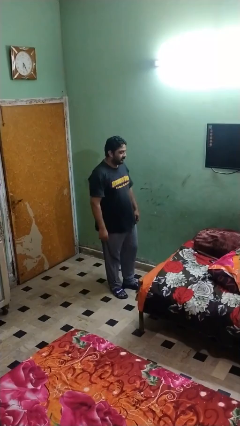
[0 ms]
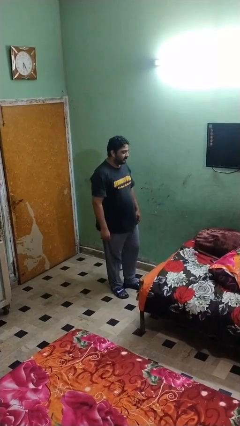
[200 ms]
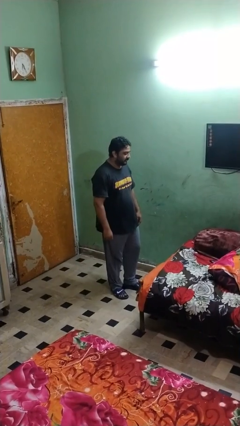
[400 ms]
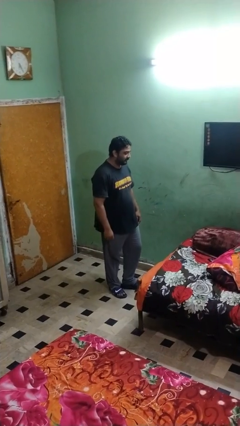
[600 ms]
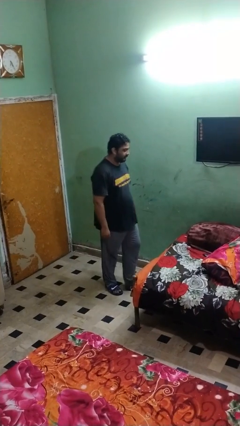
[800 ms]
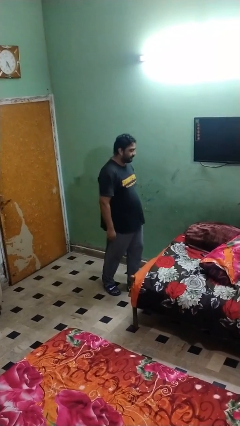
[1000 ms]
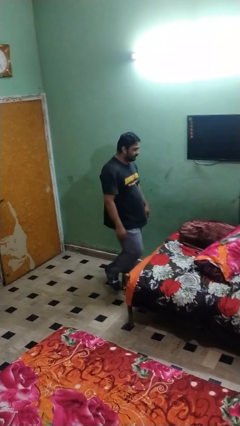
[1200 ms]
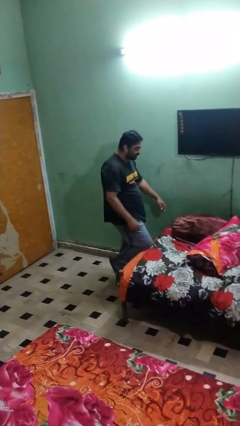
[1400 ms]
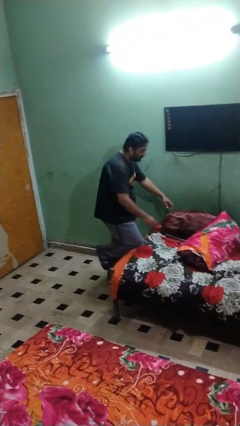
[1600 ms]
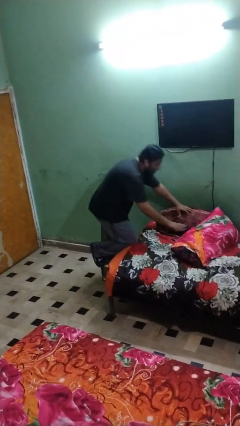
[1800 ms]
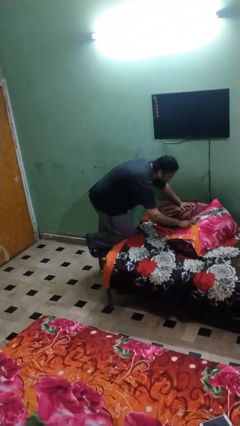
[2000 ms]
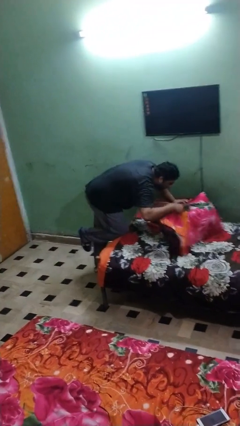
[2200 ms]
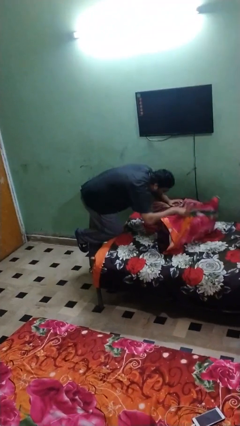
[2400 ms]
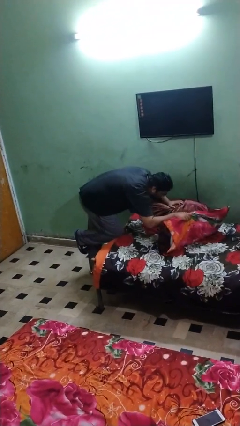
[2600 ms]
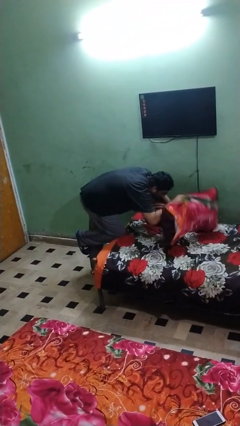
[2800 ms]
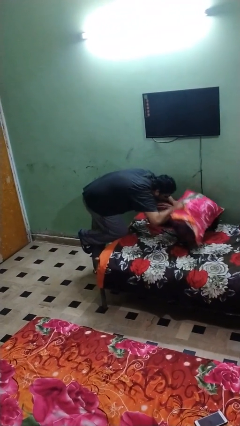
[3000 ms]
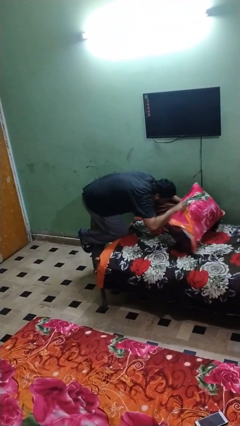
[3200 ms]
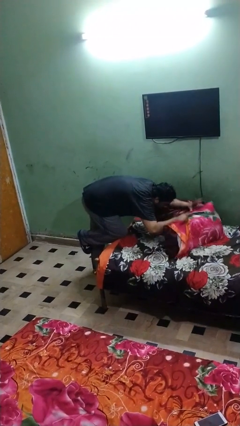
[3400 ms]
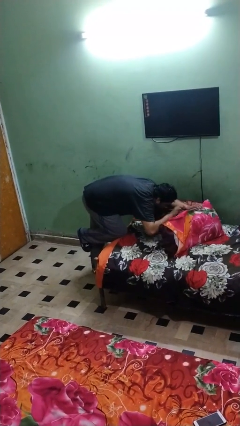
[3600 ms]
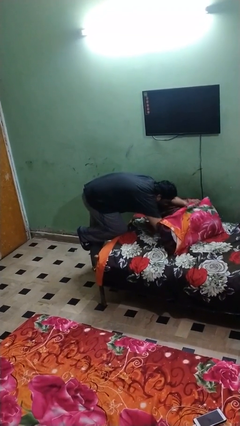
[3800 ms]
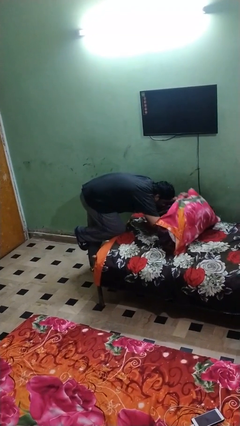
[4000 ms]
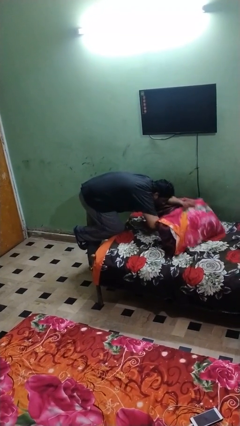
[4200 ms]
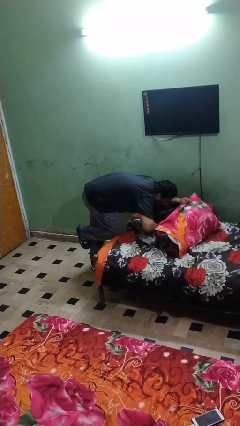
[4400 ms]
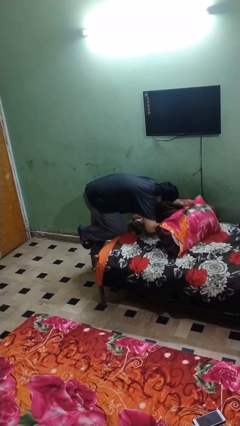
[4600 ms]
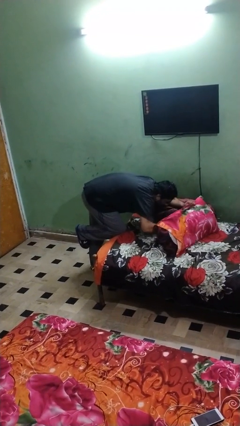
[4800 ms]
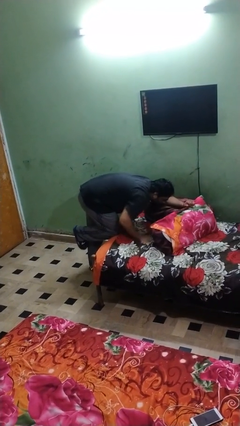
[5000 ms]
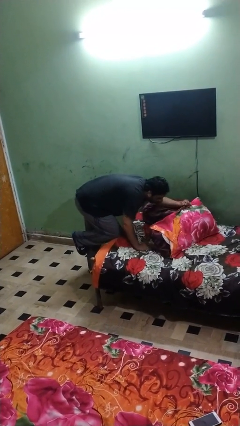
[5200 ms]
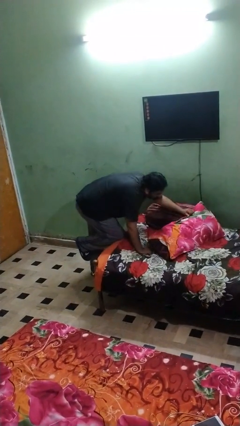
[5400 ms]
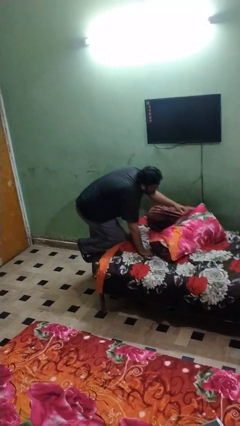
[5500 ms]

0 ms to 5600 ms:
person searches in couch

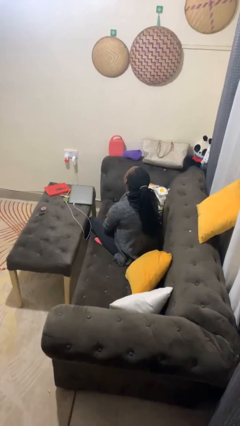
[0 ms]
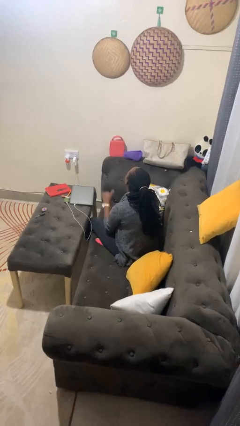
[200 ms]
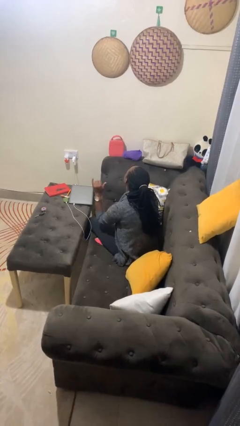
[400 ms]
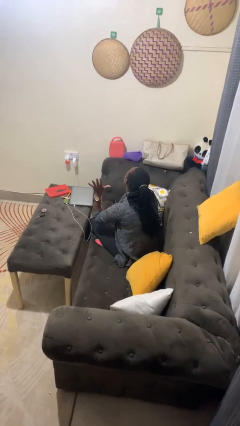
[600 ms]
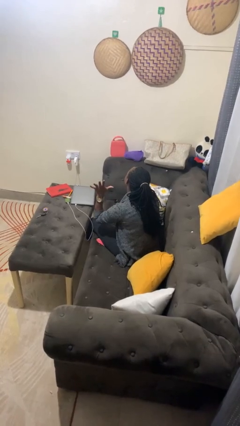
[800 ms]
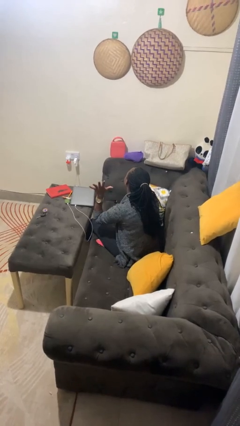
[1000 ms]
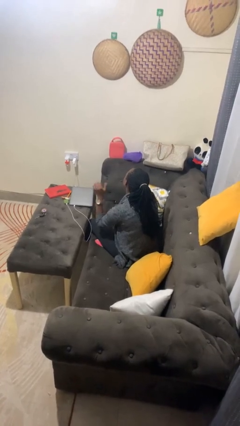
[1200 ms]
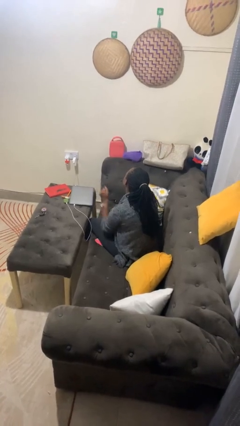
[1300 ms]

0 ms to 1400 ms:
person gestures number five

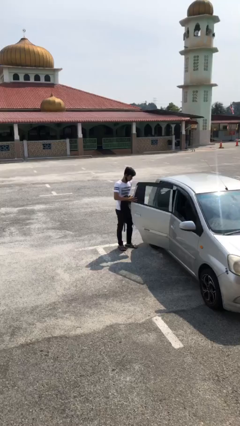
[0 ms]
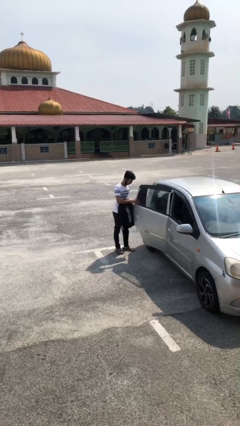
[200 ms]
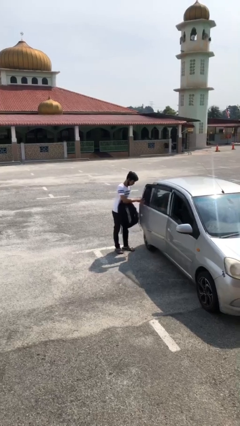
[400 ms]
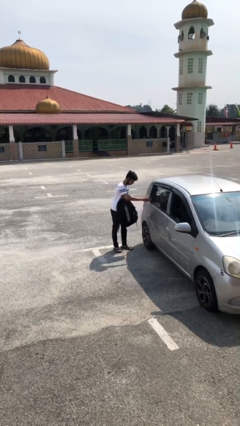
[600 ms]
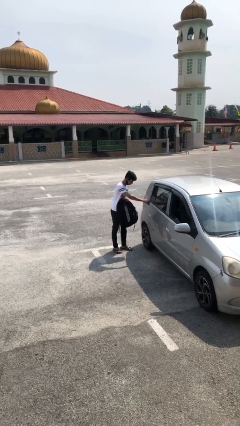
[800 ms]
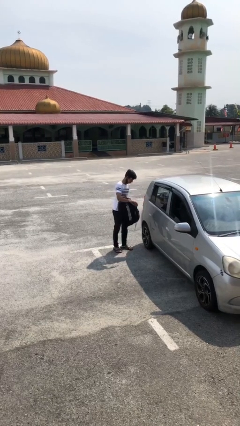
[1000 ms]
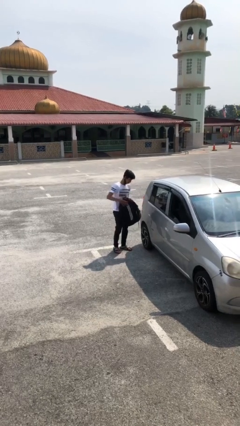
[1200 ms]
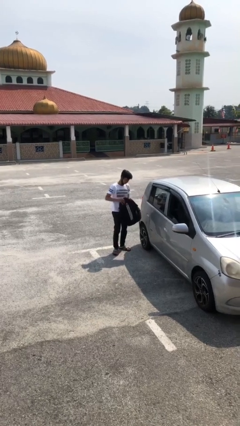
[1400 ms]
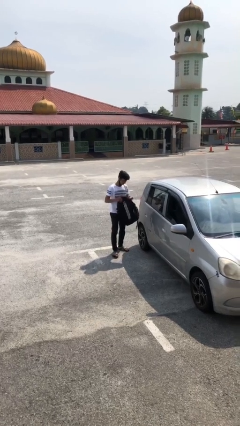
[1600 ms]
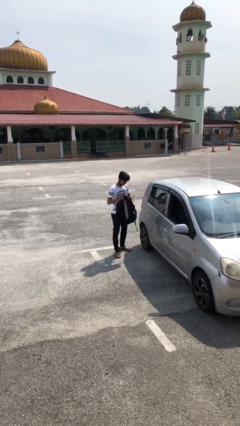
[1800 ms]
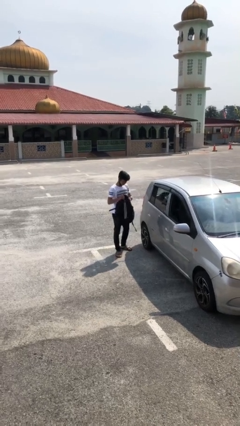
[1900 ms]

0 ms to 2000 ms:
person closes car door

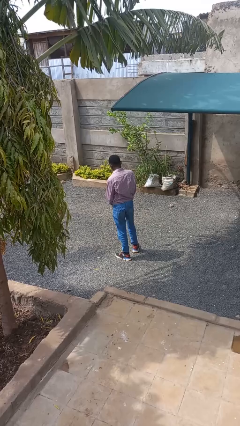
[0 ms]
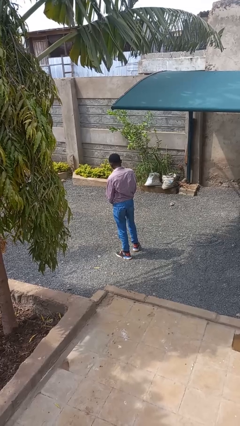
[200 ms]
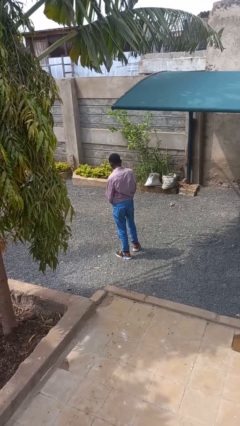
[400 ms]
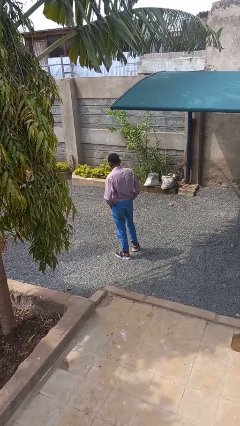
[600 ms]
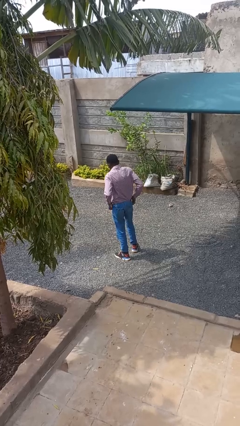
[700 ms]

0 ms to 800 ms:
person tucks in shirt

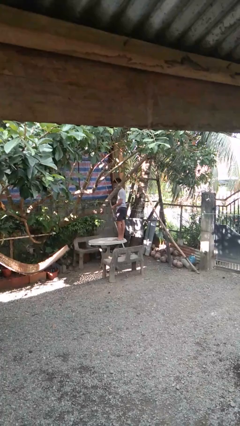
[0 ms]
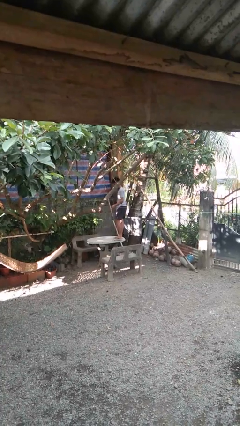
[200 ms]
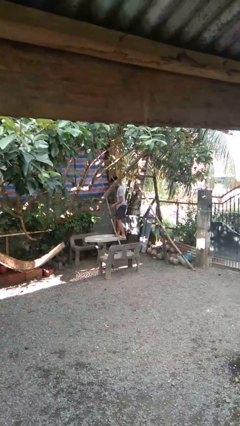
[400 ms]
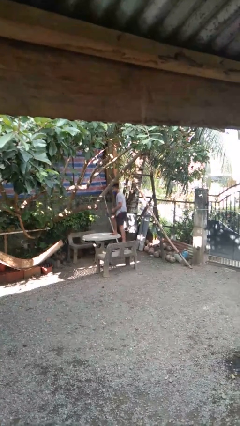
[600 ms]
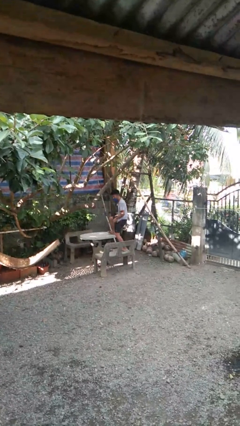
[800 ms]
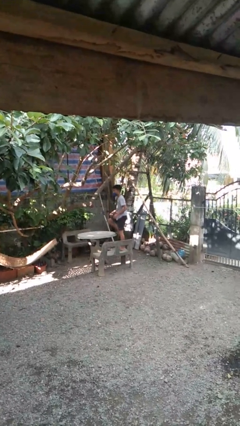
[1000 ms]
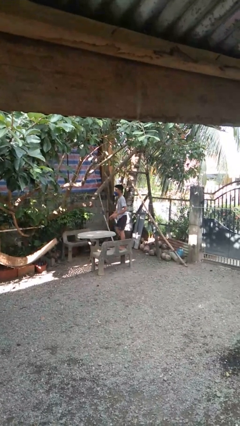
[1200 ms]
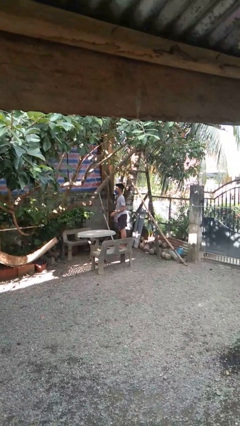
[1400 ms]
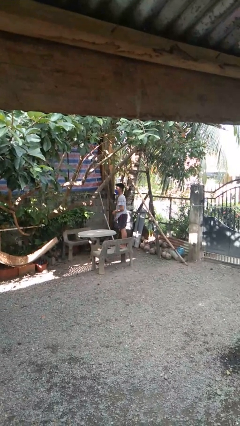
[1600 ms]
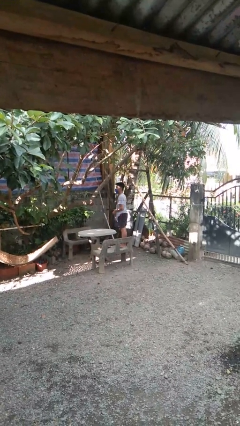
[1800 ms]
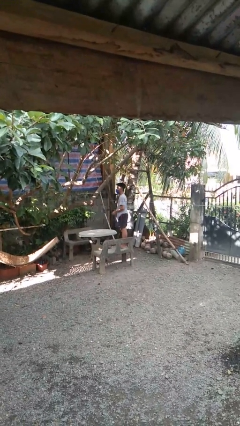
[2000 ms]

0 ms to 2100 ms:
person climbs off table

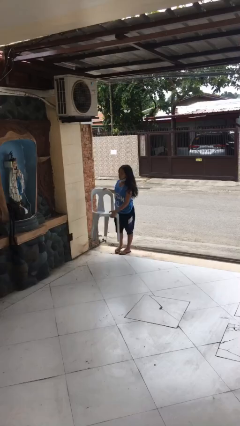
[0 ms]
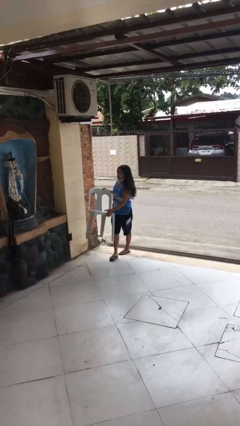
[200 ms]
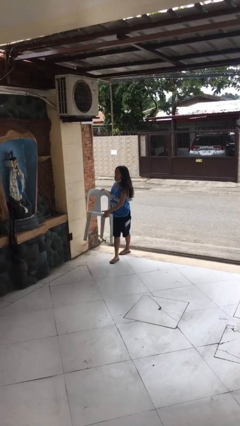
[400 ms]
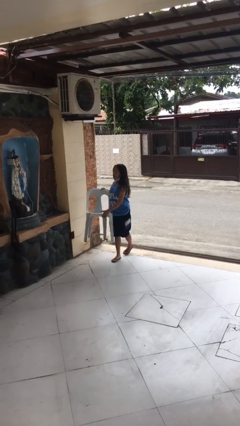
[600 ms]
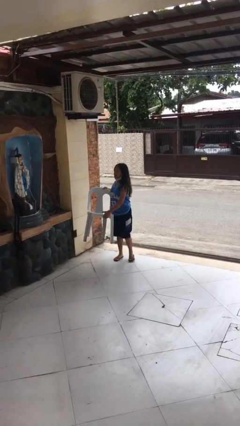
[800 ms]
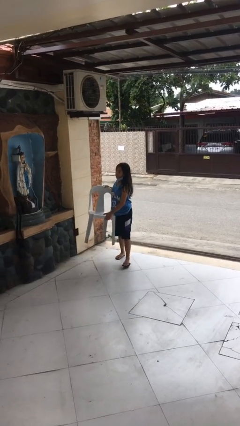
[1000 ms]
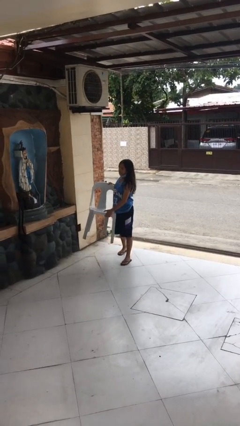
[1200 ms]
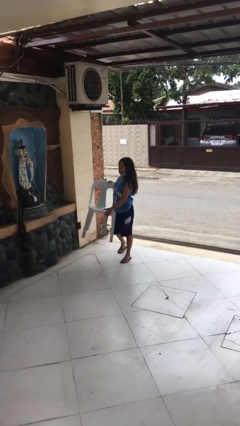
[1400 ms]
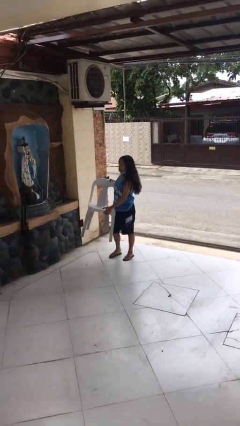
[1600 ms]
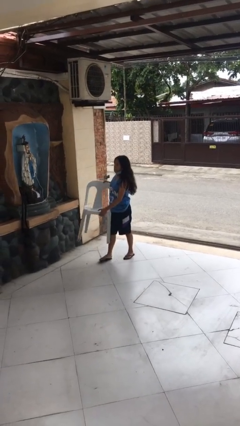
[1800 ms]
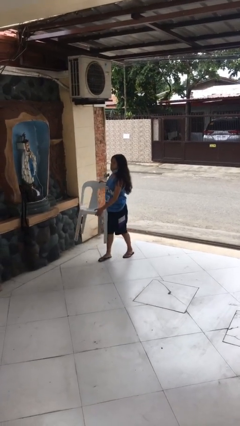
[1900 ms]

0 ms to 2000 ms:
person carries heavy object

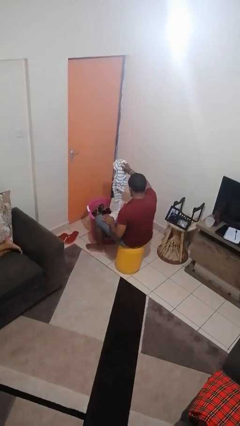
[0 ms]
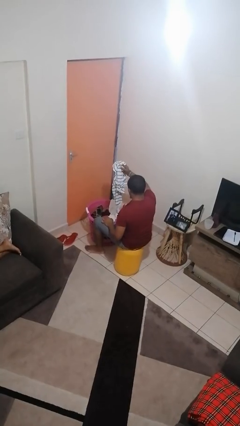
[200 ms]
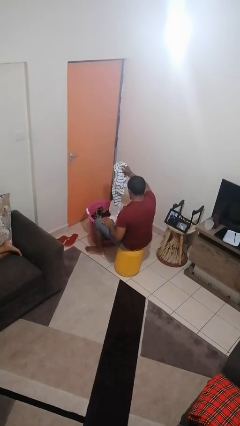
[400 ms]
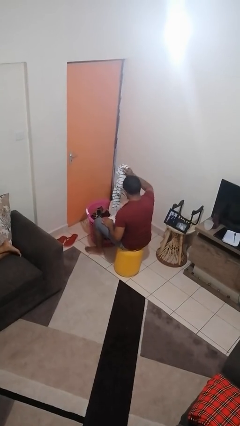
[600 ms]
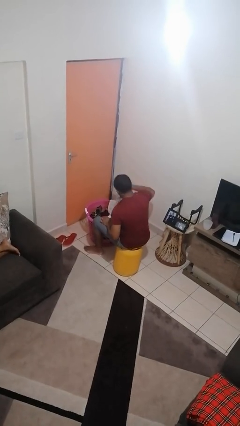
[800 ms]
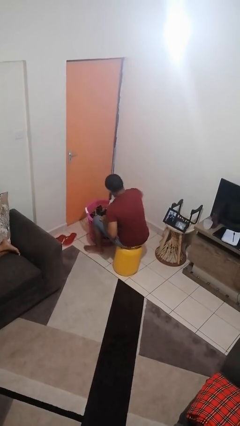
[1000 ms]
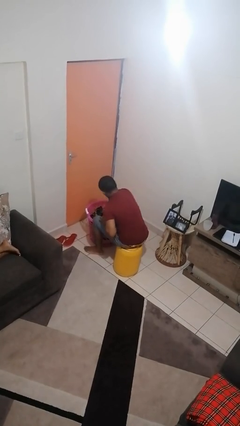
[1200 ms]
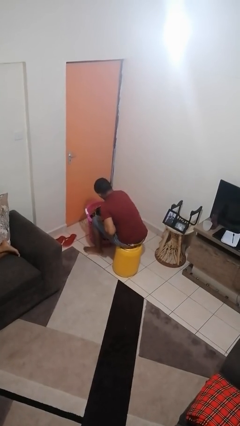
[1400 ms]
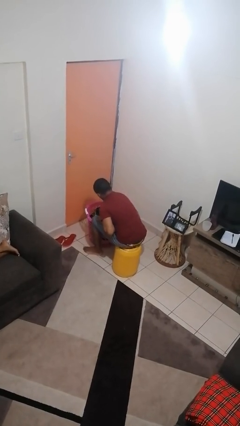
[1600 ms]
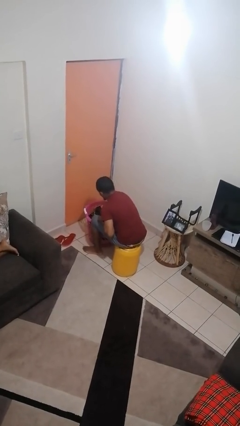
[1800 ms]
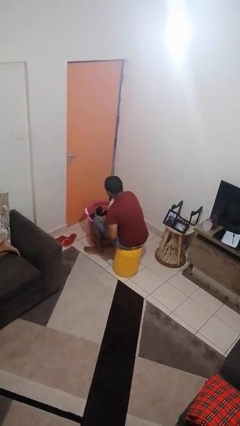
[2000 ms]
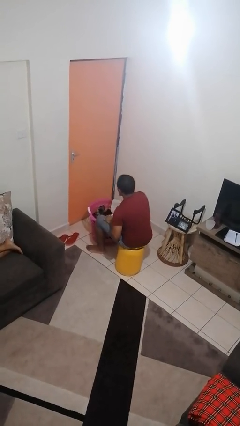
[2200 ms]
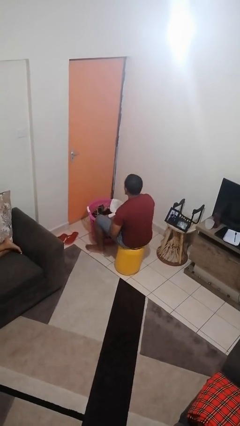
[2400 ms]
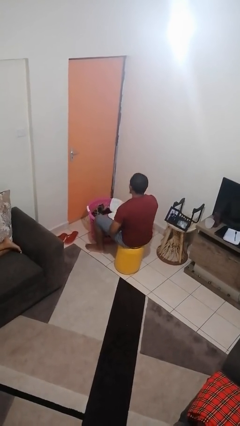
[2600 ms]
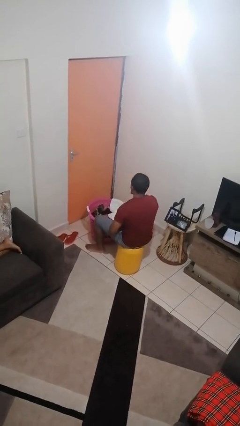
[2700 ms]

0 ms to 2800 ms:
person puts object into basket

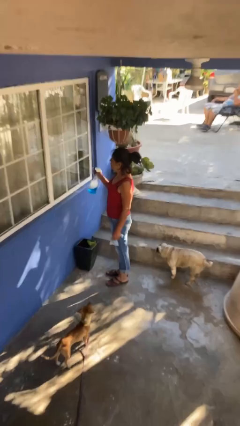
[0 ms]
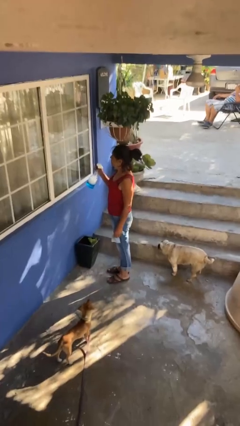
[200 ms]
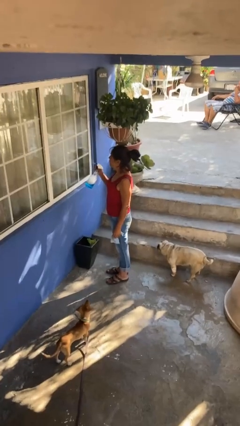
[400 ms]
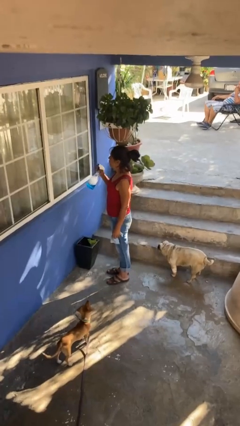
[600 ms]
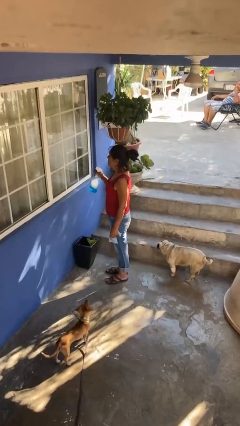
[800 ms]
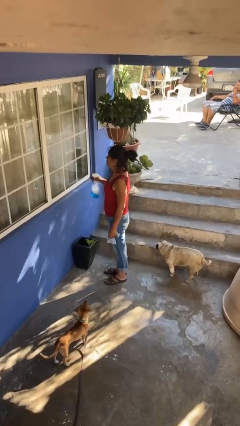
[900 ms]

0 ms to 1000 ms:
person sprays from bottle
